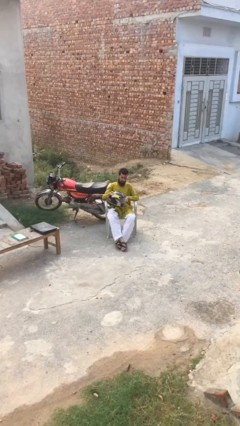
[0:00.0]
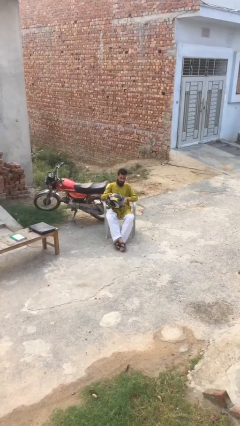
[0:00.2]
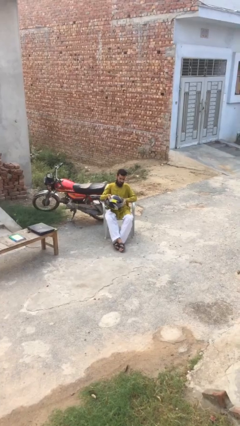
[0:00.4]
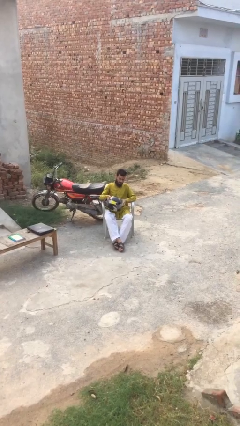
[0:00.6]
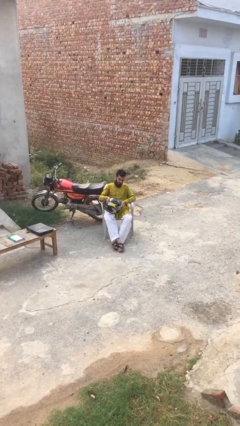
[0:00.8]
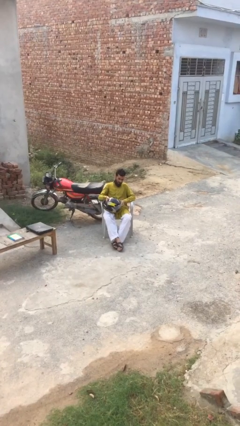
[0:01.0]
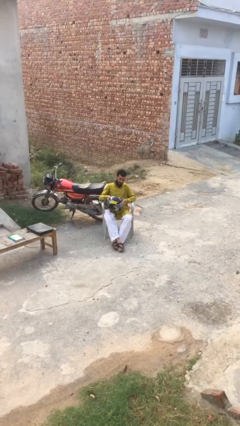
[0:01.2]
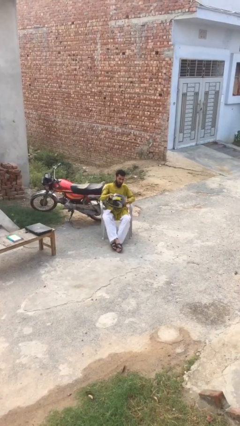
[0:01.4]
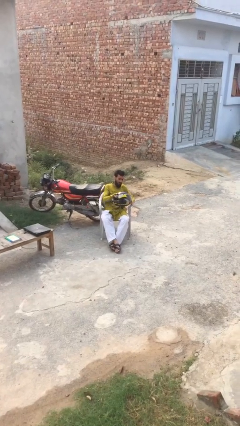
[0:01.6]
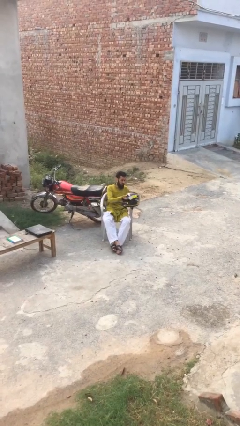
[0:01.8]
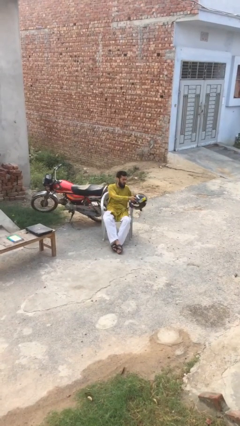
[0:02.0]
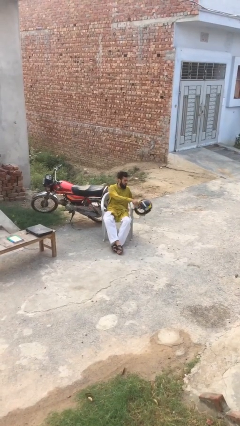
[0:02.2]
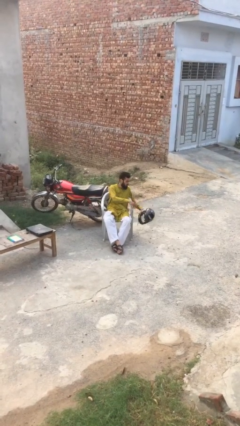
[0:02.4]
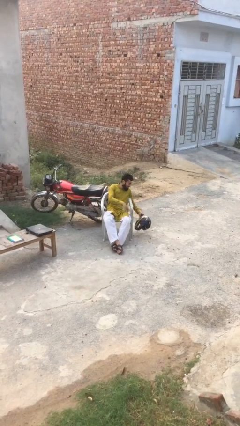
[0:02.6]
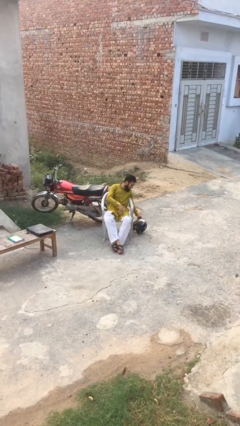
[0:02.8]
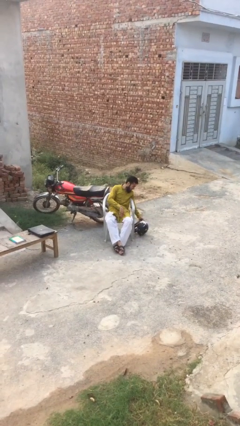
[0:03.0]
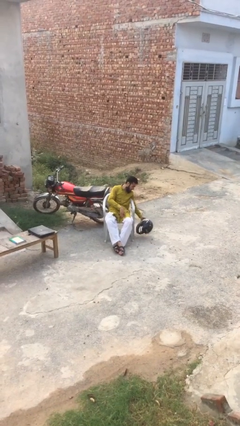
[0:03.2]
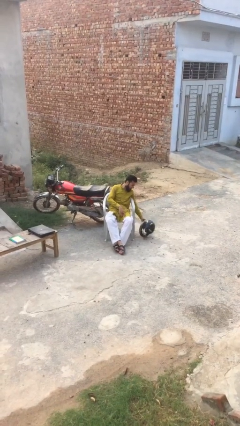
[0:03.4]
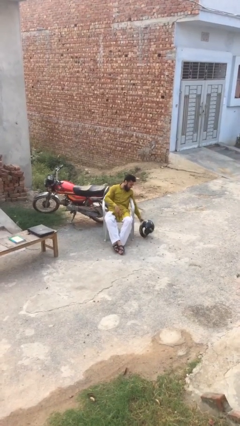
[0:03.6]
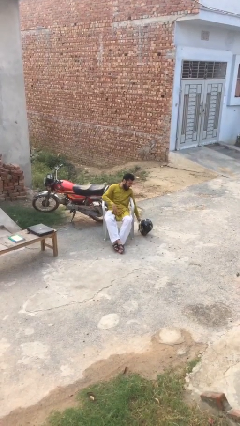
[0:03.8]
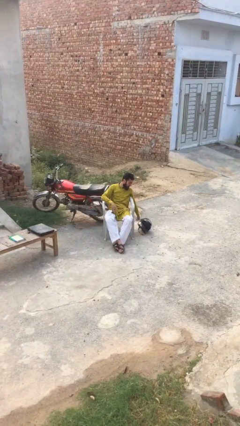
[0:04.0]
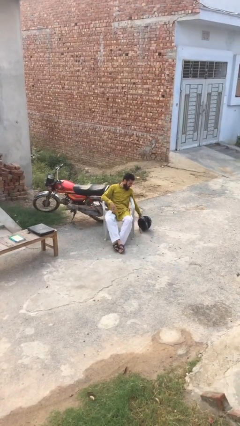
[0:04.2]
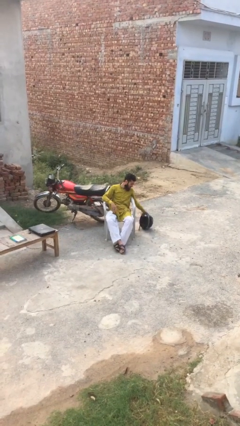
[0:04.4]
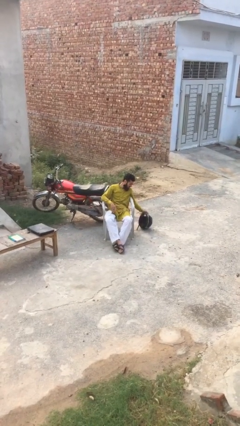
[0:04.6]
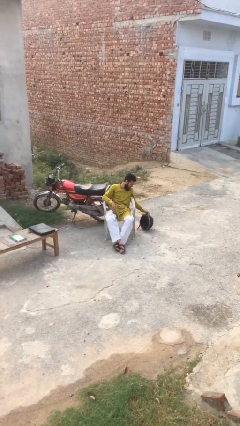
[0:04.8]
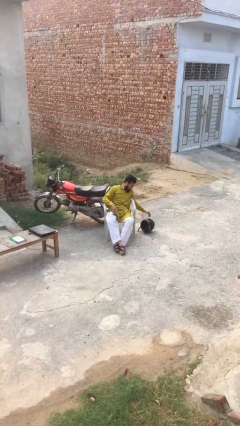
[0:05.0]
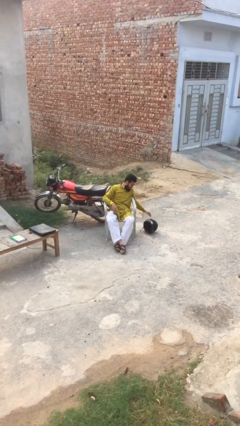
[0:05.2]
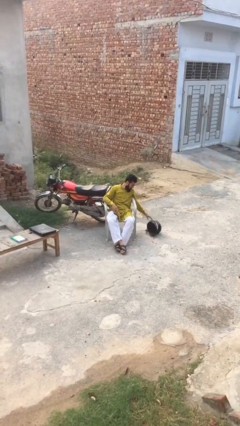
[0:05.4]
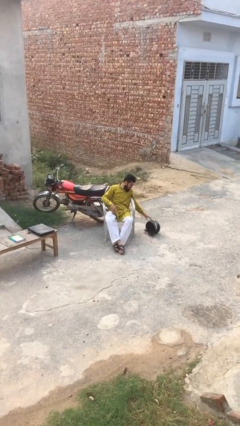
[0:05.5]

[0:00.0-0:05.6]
person puts down object on floor

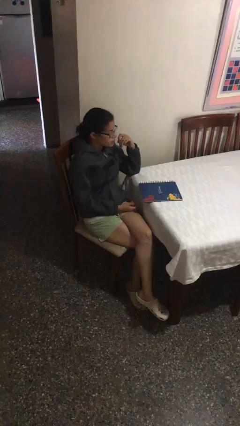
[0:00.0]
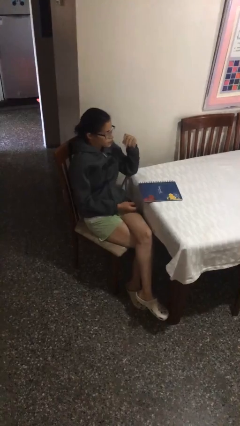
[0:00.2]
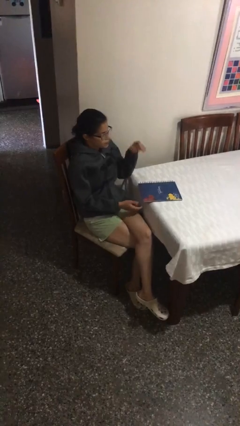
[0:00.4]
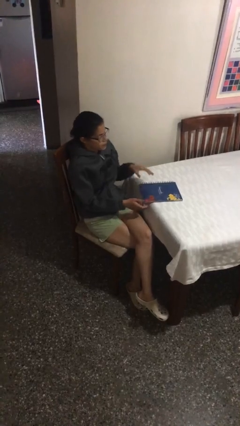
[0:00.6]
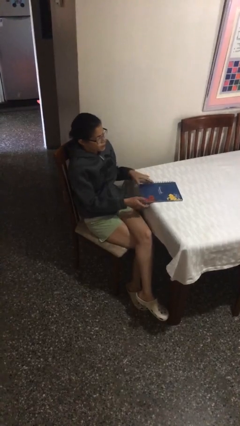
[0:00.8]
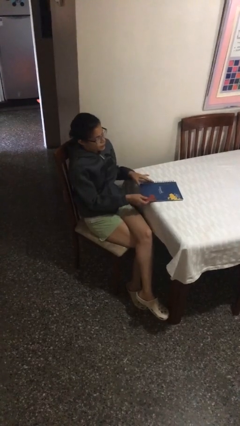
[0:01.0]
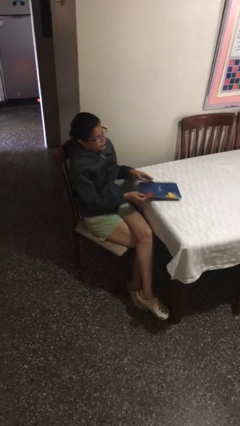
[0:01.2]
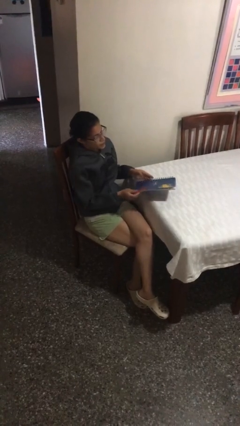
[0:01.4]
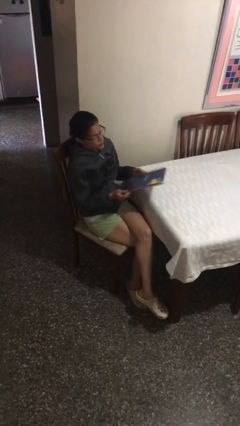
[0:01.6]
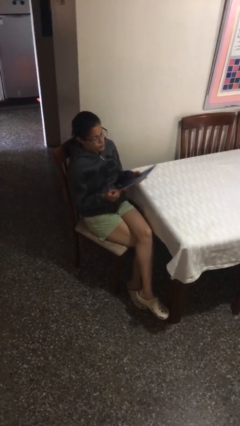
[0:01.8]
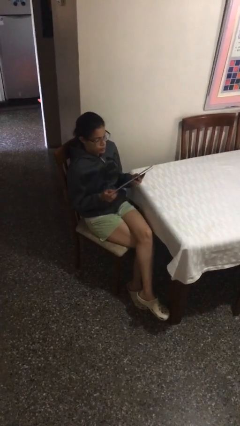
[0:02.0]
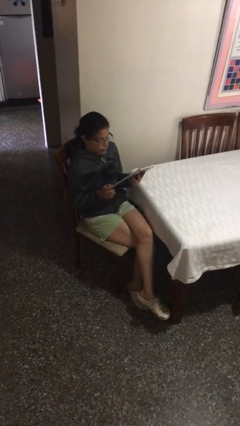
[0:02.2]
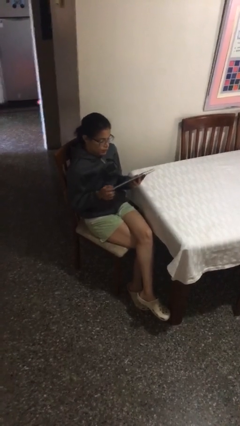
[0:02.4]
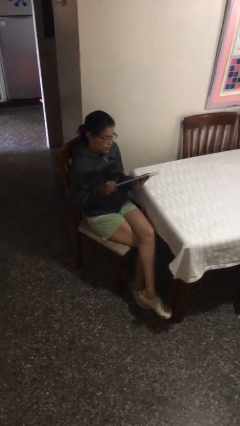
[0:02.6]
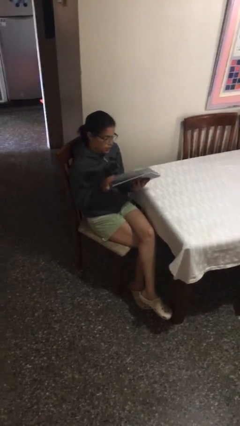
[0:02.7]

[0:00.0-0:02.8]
person picks up object from table

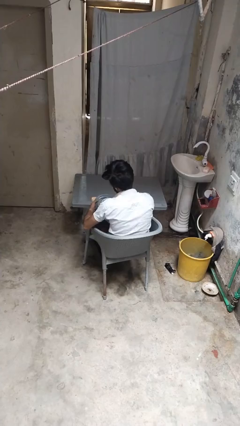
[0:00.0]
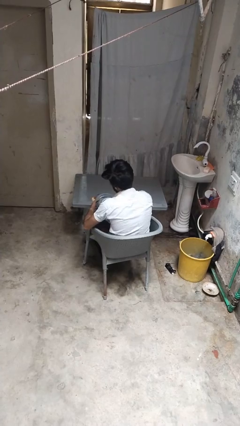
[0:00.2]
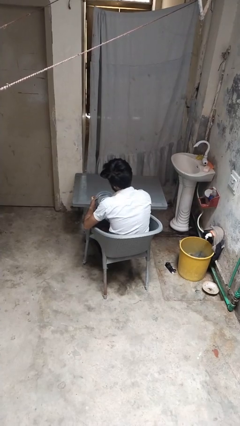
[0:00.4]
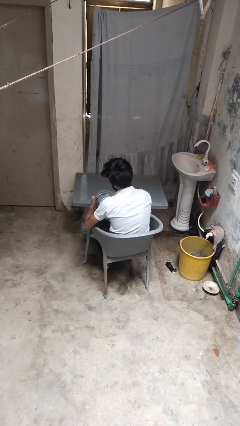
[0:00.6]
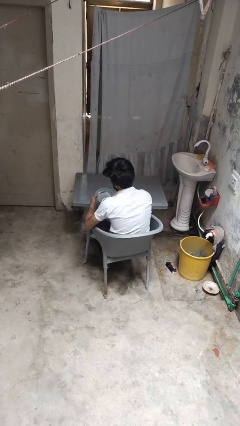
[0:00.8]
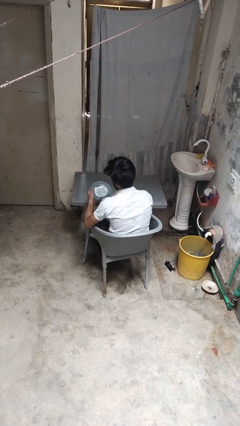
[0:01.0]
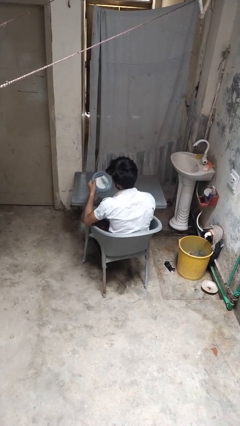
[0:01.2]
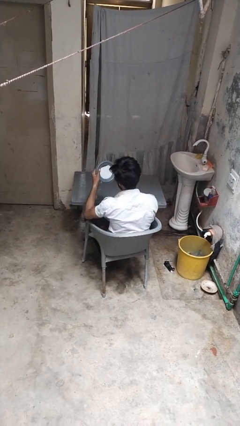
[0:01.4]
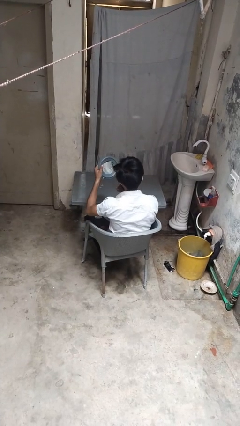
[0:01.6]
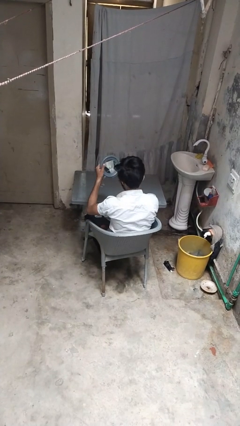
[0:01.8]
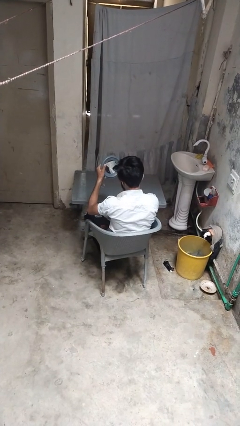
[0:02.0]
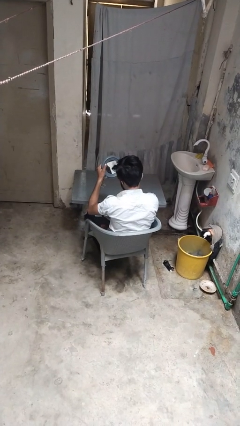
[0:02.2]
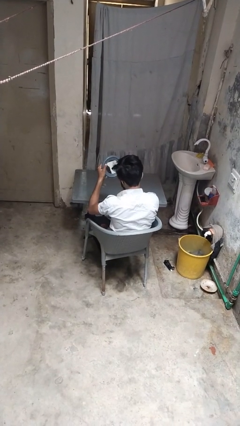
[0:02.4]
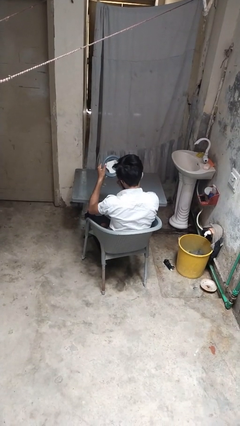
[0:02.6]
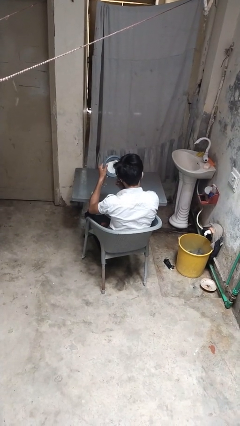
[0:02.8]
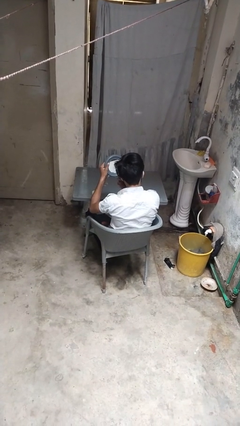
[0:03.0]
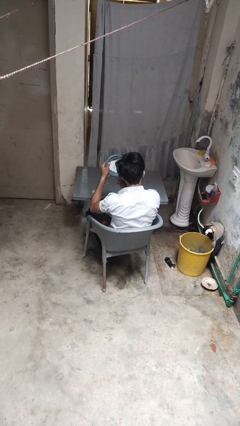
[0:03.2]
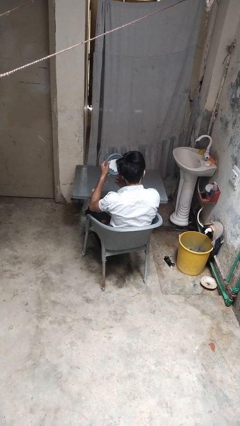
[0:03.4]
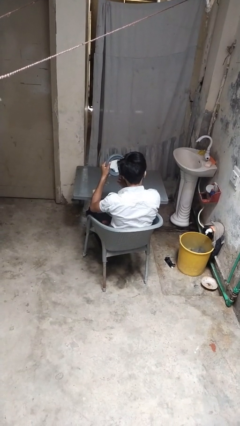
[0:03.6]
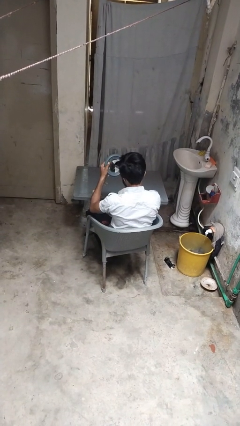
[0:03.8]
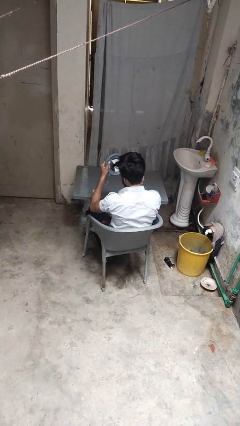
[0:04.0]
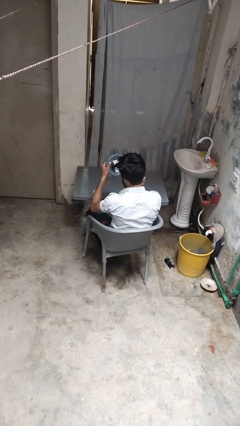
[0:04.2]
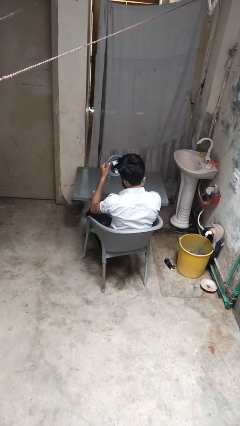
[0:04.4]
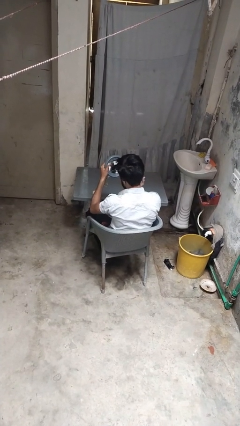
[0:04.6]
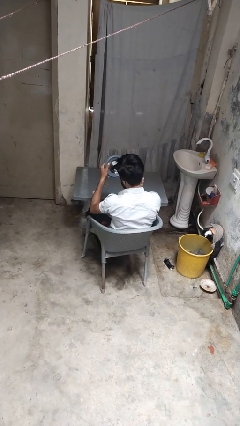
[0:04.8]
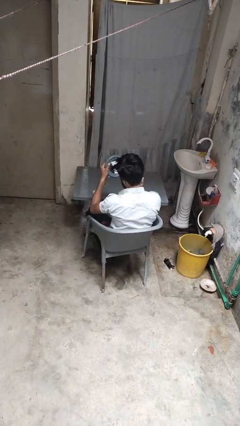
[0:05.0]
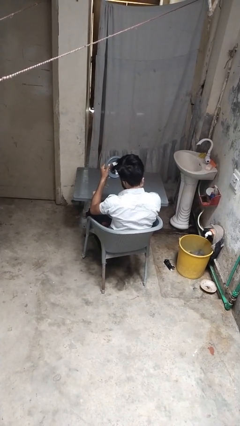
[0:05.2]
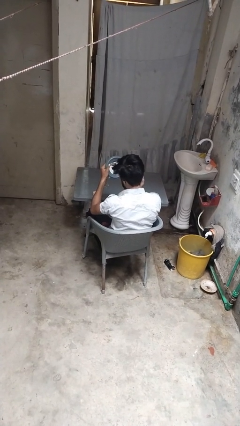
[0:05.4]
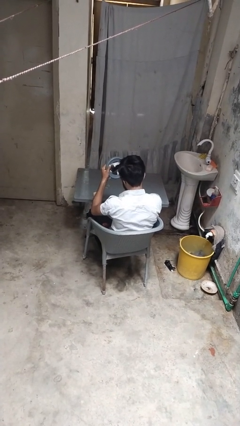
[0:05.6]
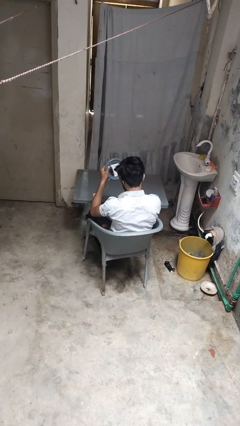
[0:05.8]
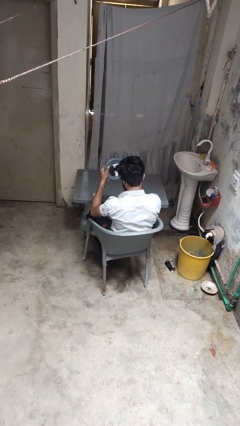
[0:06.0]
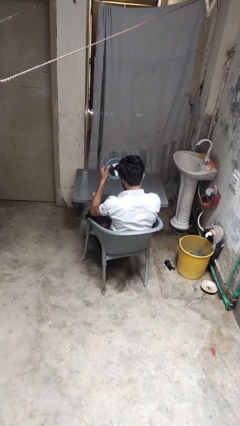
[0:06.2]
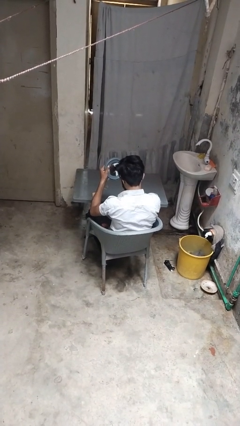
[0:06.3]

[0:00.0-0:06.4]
person applies foundation makeup

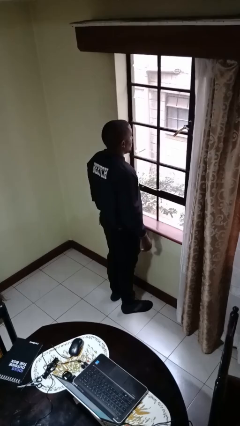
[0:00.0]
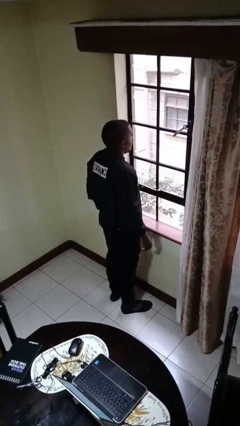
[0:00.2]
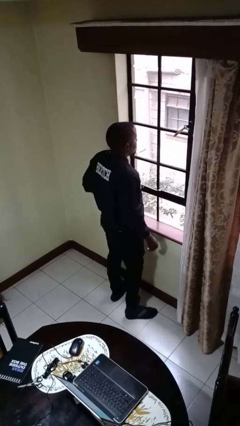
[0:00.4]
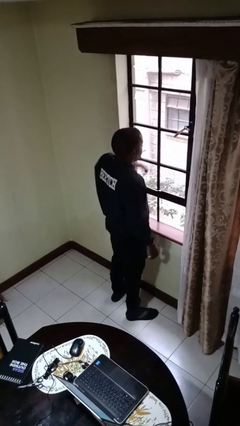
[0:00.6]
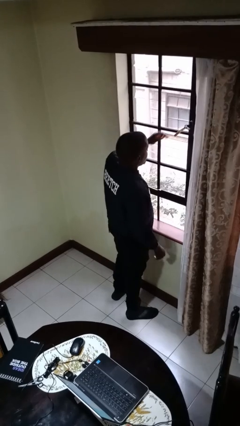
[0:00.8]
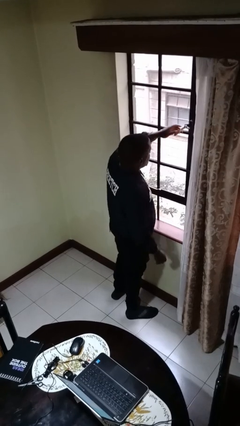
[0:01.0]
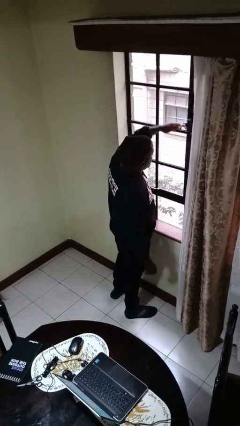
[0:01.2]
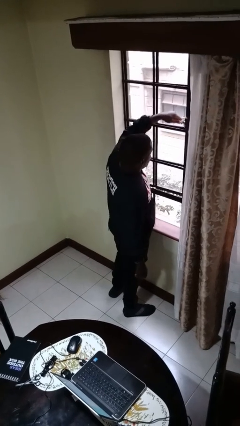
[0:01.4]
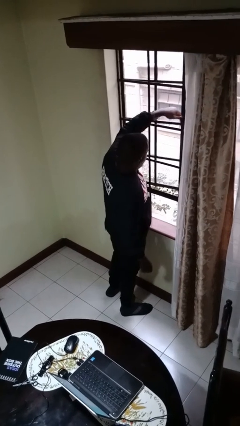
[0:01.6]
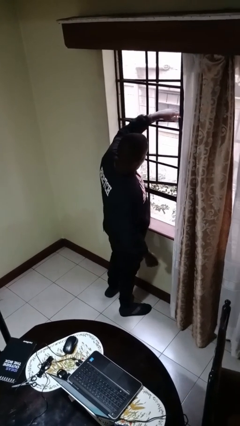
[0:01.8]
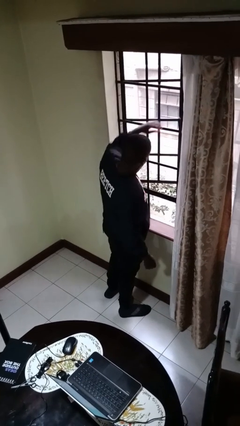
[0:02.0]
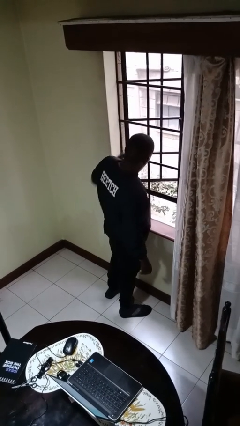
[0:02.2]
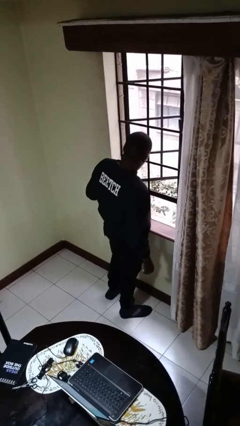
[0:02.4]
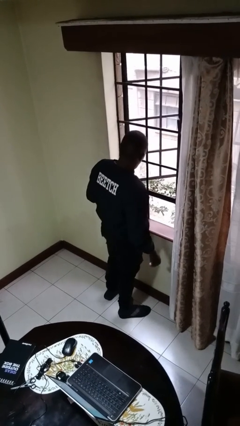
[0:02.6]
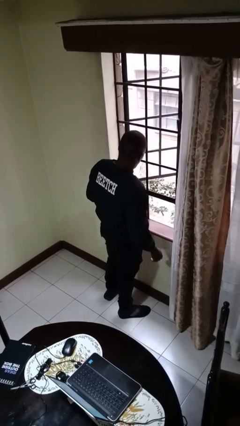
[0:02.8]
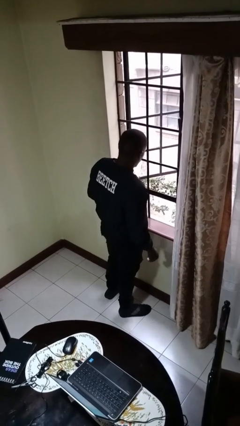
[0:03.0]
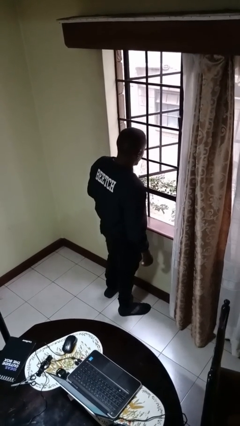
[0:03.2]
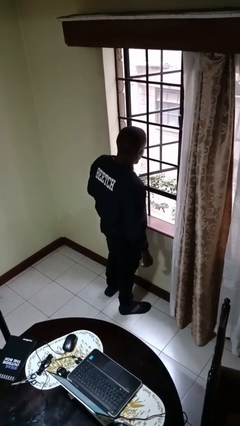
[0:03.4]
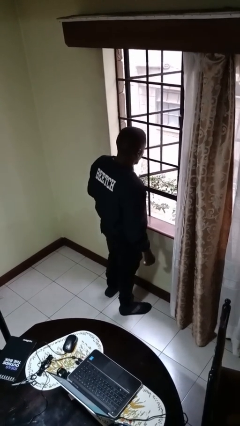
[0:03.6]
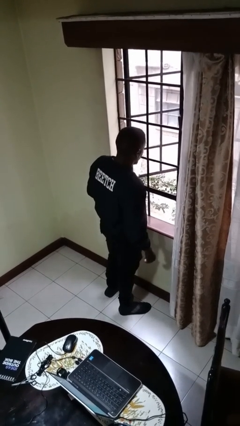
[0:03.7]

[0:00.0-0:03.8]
person opens home window
